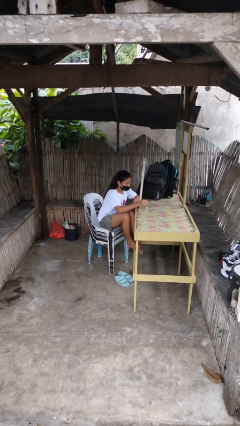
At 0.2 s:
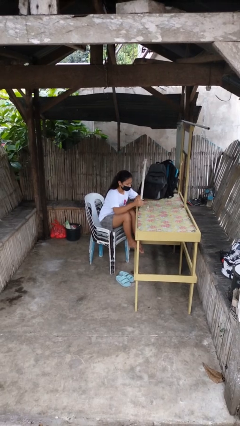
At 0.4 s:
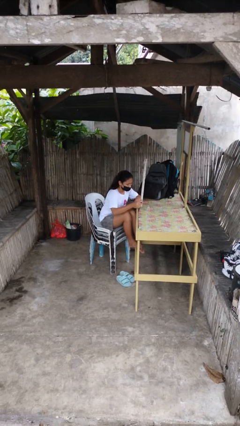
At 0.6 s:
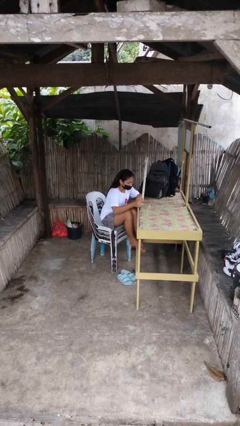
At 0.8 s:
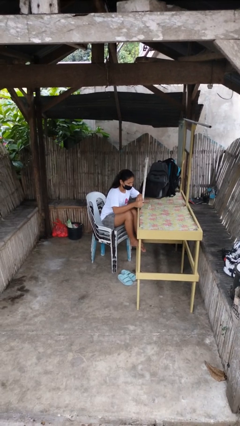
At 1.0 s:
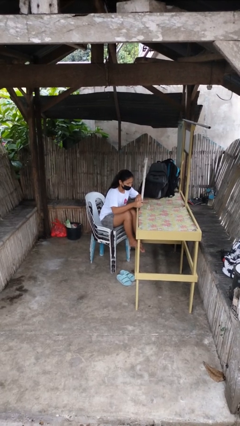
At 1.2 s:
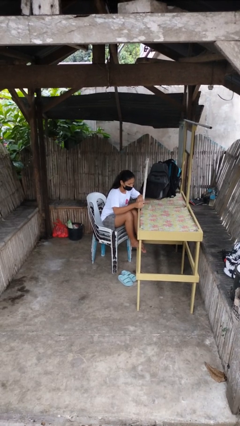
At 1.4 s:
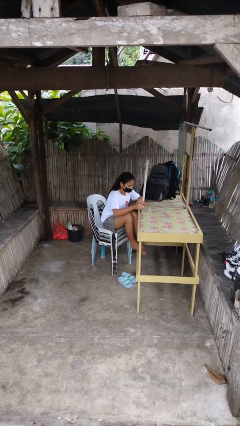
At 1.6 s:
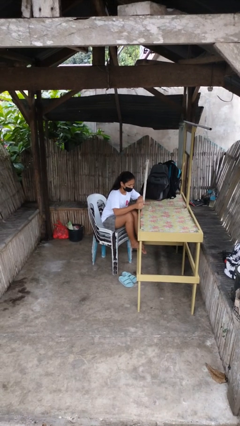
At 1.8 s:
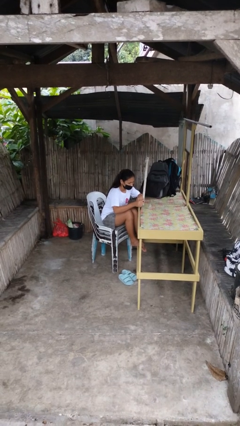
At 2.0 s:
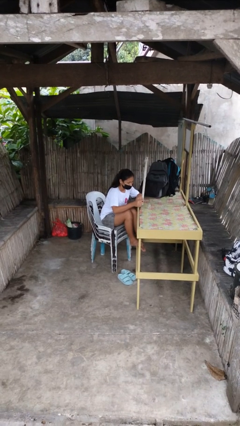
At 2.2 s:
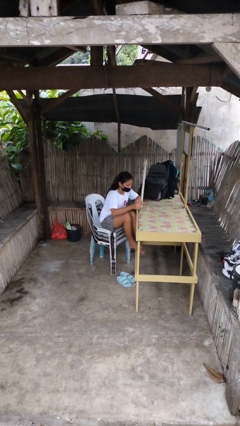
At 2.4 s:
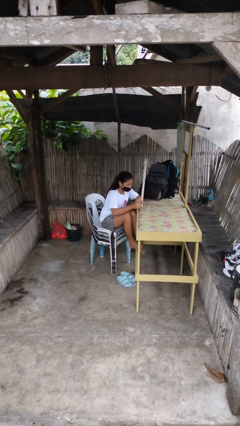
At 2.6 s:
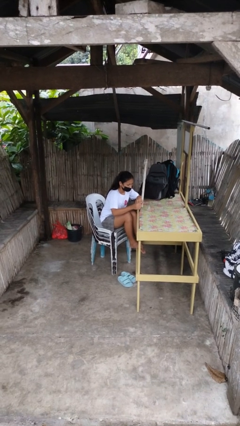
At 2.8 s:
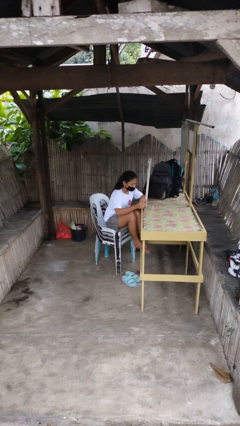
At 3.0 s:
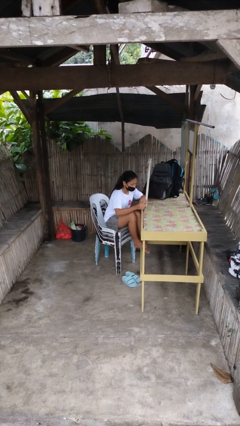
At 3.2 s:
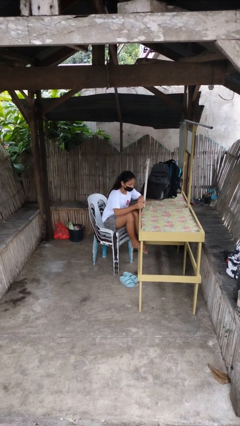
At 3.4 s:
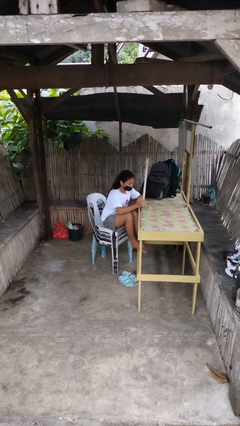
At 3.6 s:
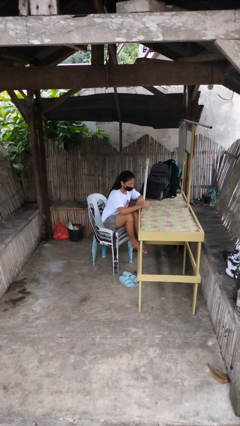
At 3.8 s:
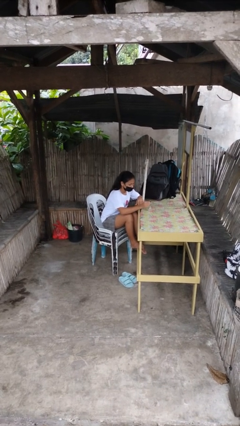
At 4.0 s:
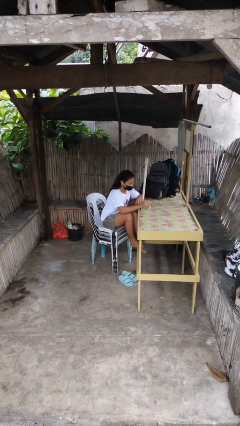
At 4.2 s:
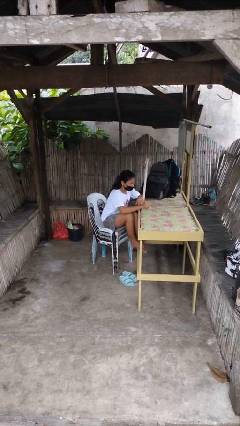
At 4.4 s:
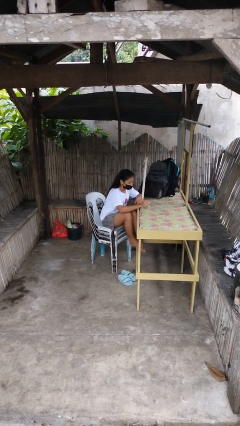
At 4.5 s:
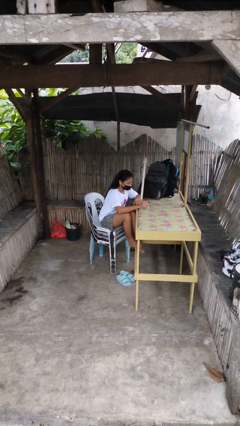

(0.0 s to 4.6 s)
person paints fingernails

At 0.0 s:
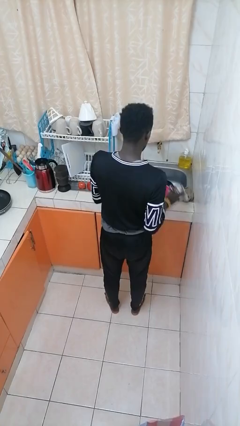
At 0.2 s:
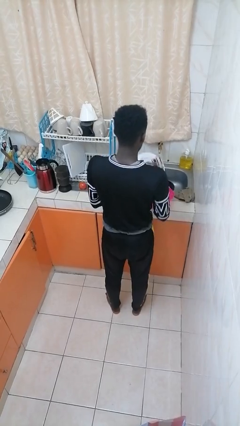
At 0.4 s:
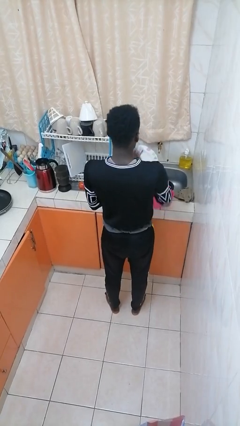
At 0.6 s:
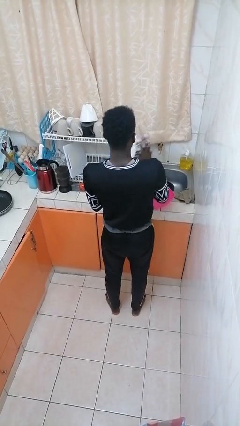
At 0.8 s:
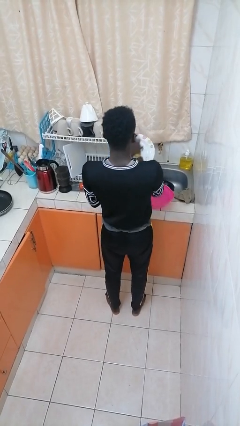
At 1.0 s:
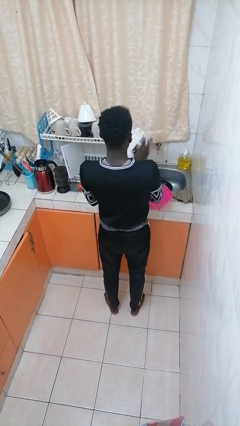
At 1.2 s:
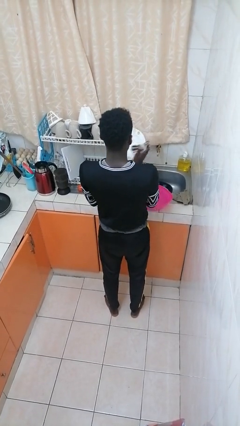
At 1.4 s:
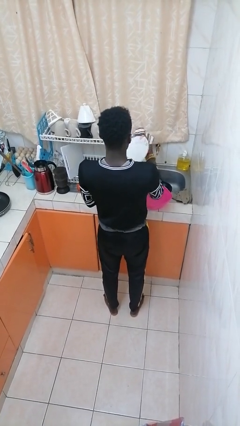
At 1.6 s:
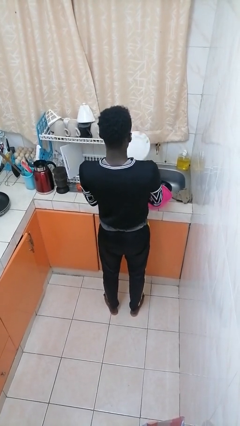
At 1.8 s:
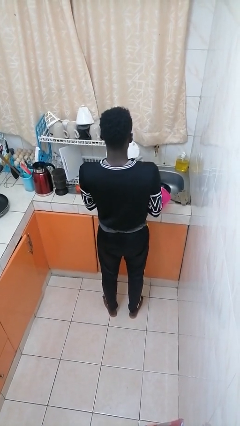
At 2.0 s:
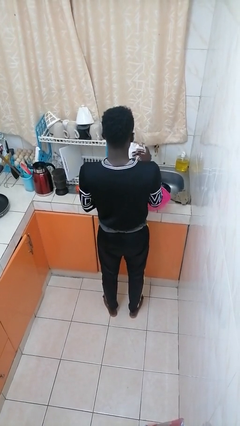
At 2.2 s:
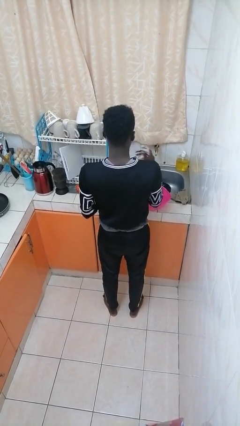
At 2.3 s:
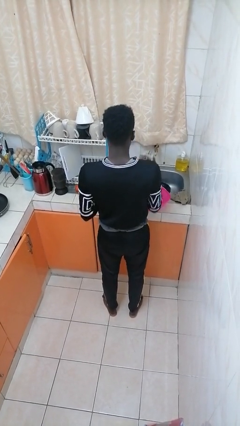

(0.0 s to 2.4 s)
person dries dish

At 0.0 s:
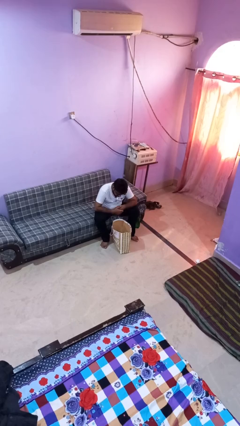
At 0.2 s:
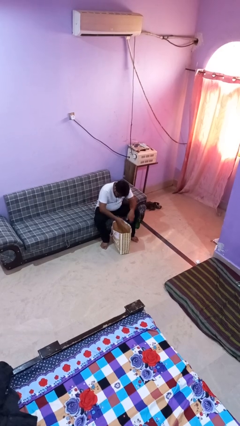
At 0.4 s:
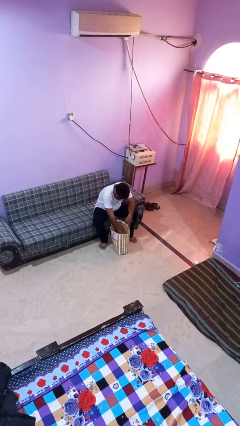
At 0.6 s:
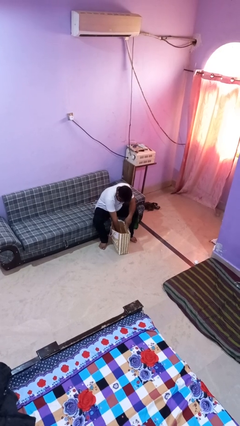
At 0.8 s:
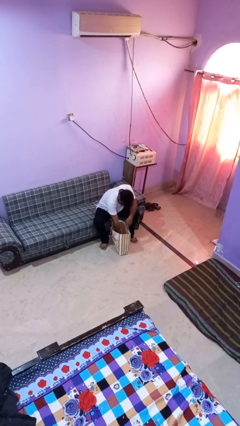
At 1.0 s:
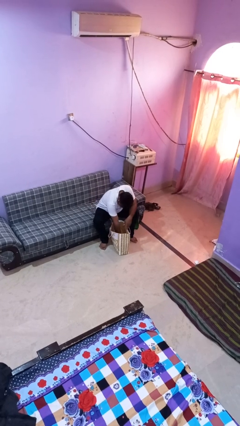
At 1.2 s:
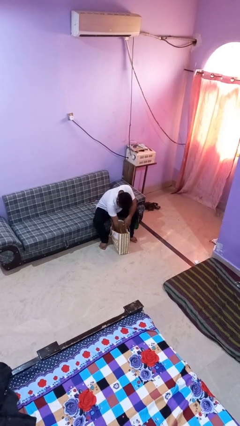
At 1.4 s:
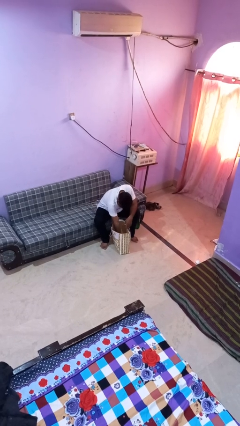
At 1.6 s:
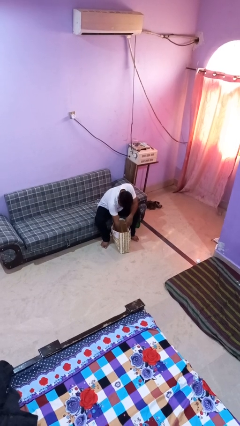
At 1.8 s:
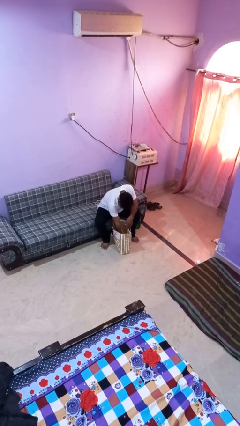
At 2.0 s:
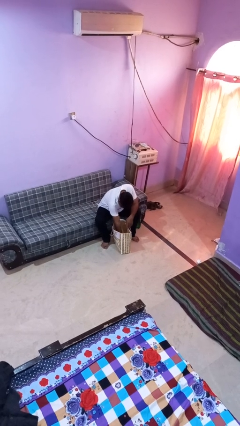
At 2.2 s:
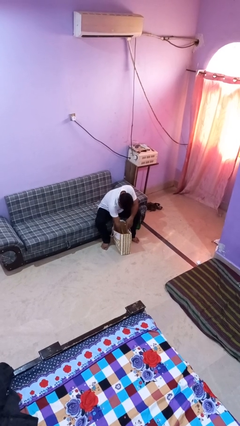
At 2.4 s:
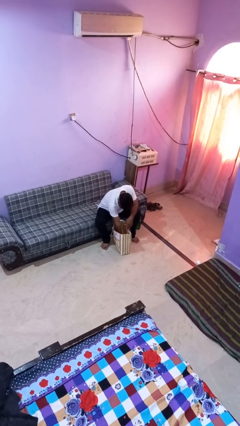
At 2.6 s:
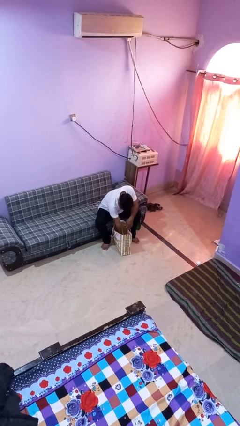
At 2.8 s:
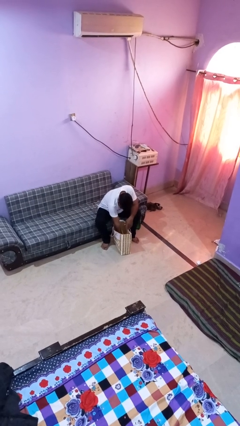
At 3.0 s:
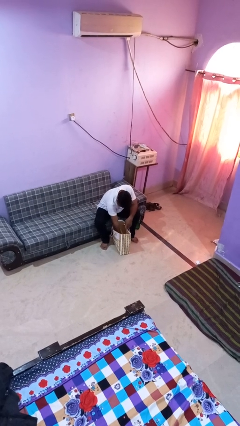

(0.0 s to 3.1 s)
person searches in bag

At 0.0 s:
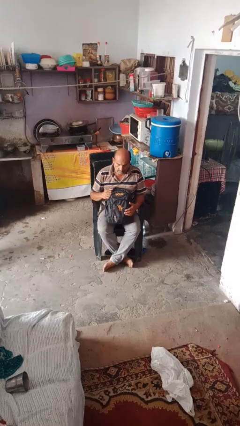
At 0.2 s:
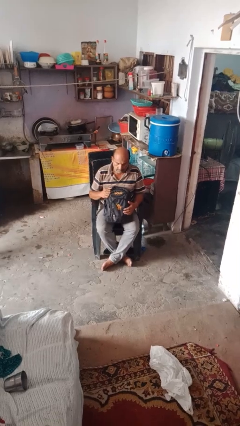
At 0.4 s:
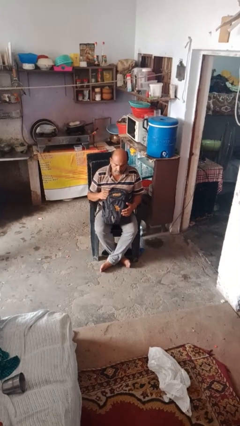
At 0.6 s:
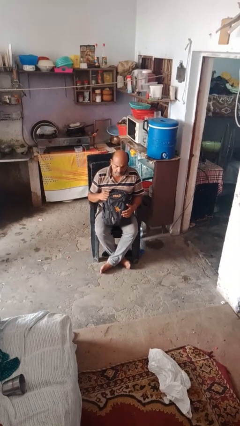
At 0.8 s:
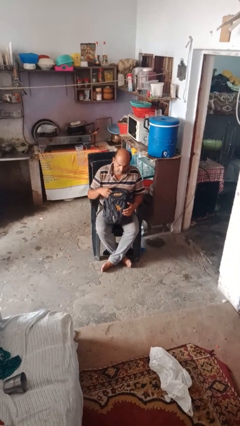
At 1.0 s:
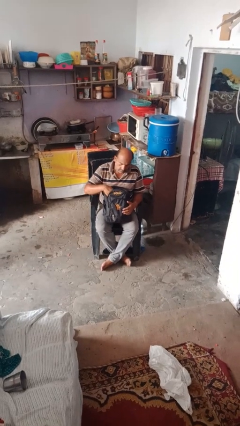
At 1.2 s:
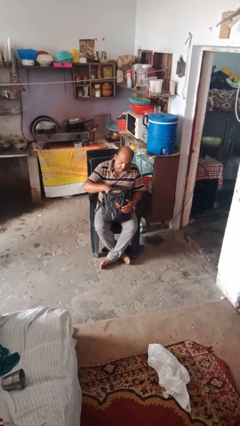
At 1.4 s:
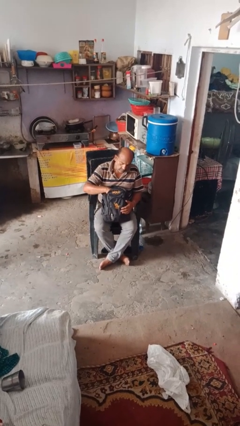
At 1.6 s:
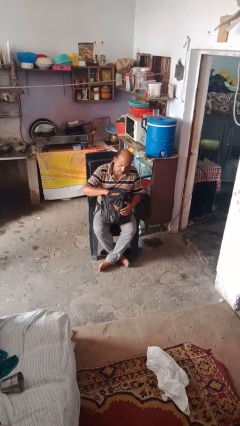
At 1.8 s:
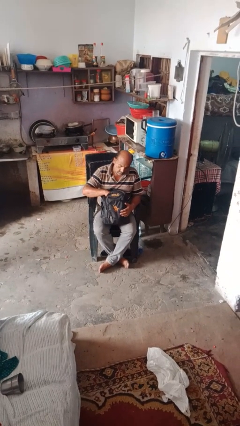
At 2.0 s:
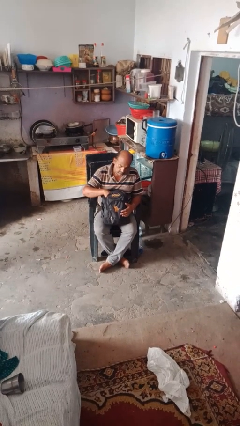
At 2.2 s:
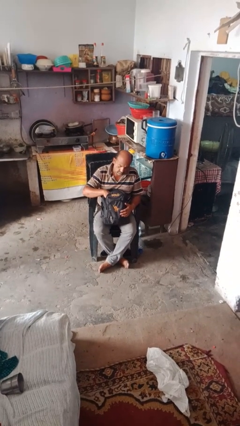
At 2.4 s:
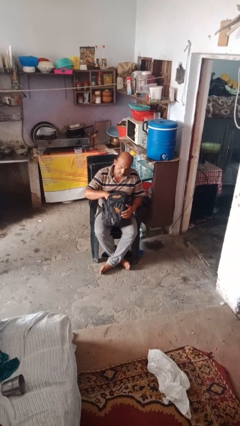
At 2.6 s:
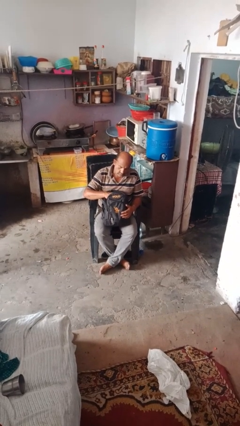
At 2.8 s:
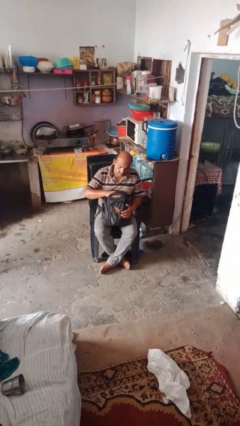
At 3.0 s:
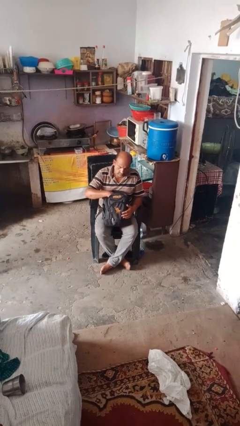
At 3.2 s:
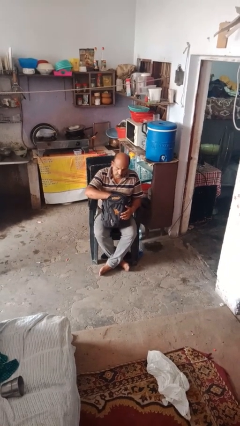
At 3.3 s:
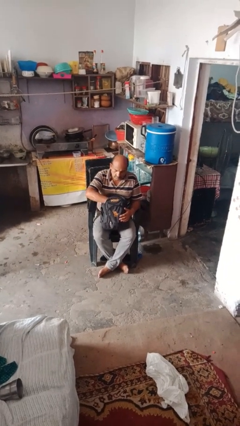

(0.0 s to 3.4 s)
person searches in backpack

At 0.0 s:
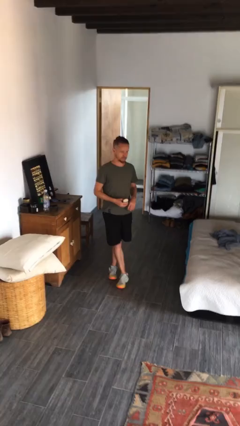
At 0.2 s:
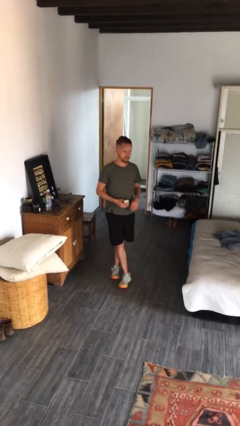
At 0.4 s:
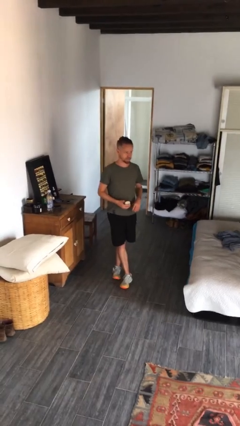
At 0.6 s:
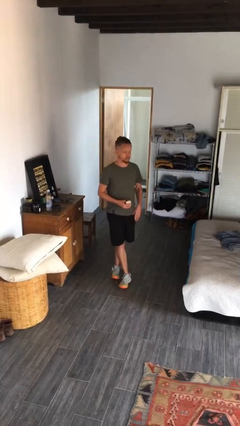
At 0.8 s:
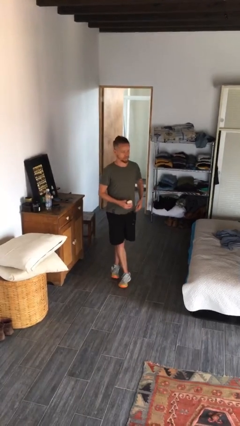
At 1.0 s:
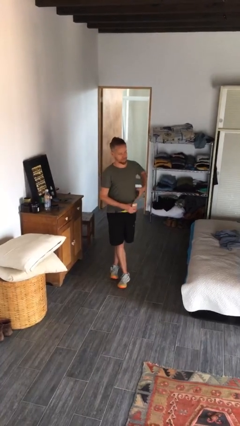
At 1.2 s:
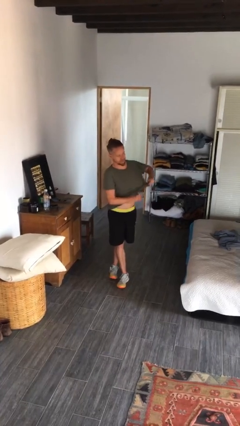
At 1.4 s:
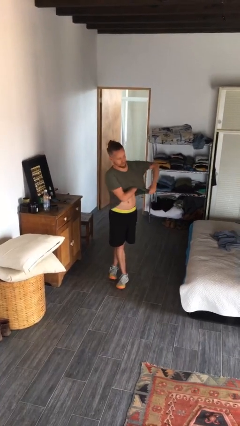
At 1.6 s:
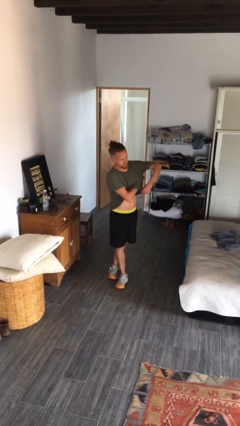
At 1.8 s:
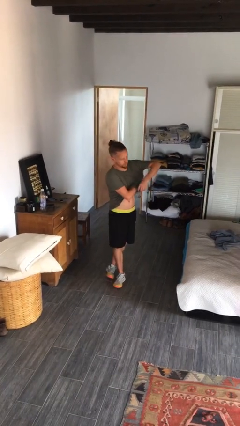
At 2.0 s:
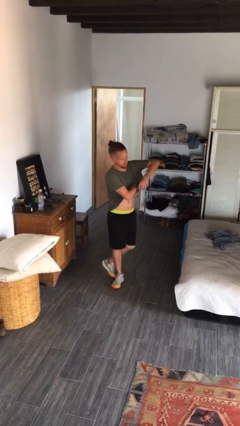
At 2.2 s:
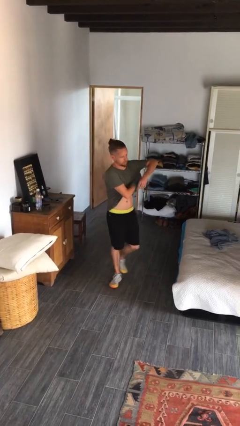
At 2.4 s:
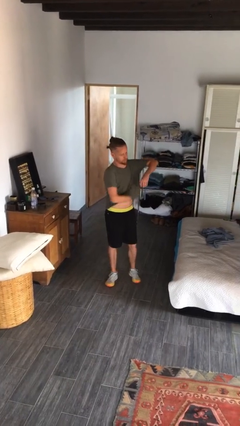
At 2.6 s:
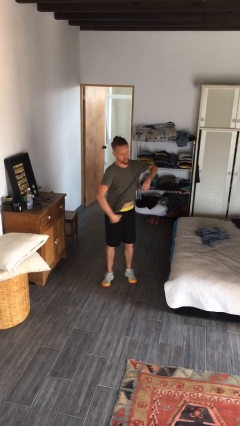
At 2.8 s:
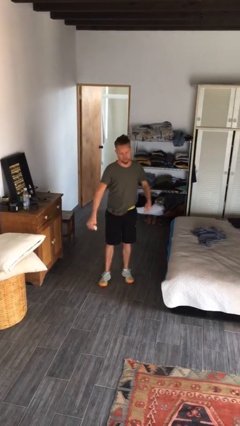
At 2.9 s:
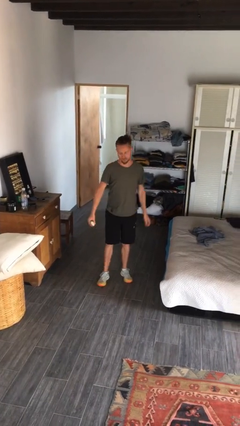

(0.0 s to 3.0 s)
person applies deodorant

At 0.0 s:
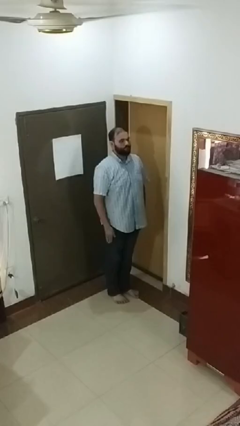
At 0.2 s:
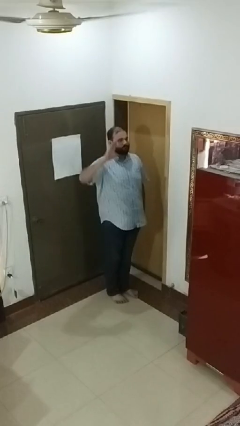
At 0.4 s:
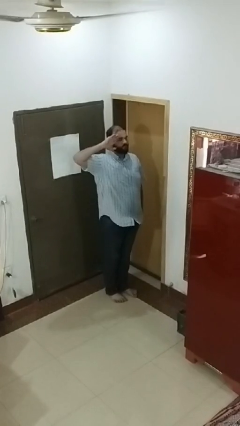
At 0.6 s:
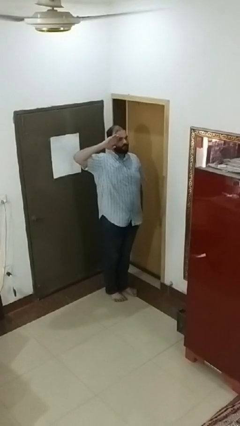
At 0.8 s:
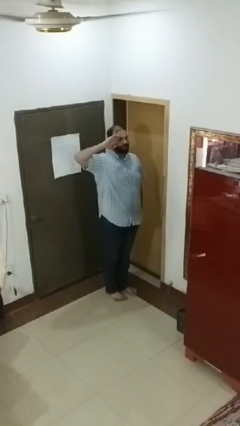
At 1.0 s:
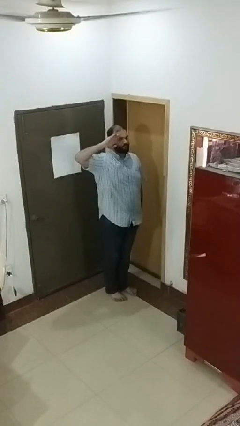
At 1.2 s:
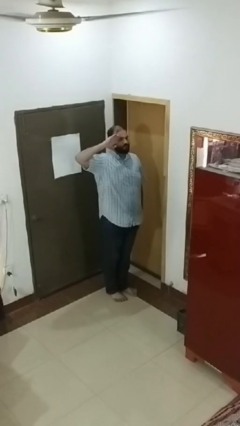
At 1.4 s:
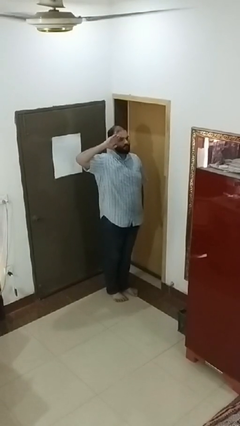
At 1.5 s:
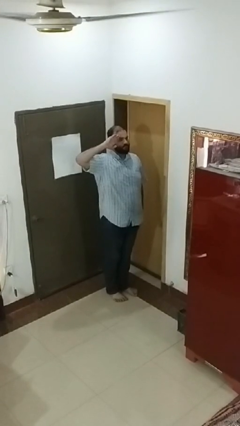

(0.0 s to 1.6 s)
person salutes
